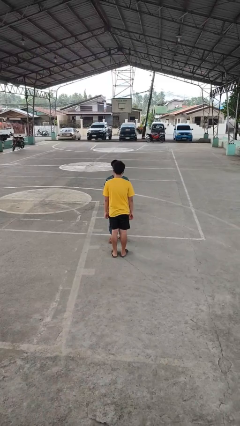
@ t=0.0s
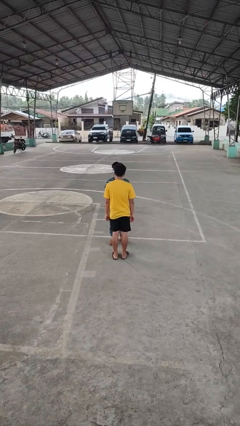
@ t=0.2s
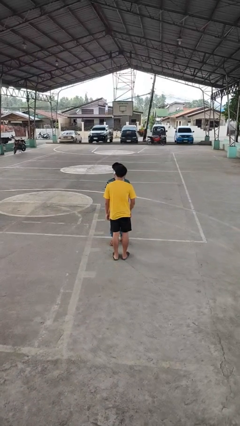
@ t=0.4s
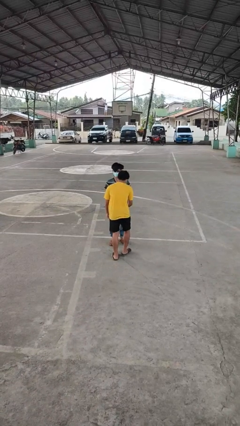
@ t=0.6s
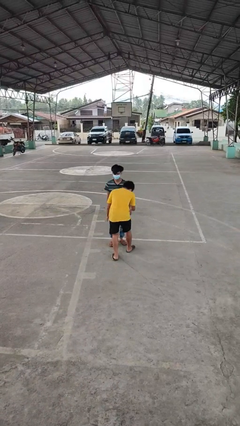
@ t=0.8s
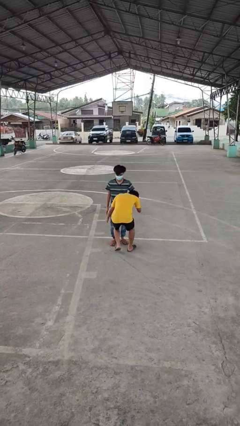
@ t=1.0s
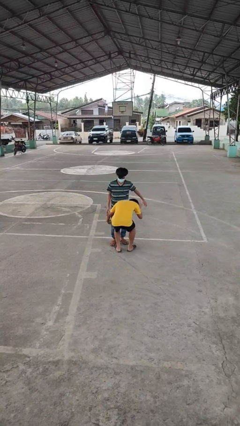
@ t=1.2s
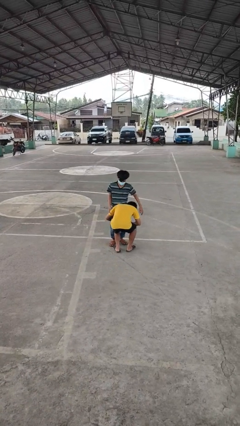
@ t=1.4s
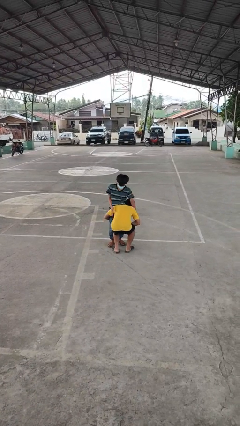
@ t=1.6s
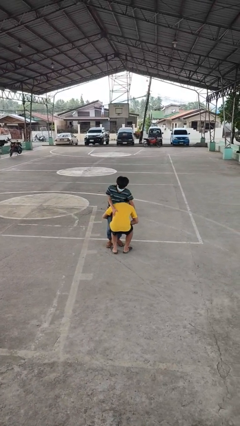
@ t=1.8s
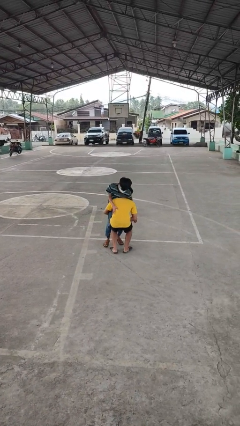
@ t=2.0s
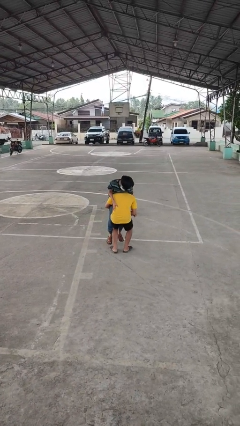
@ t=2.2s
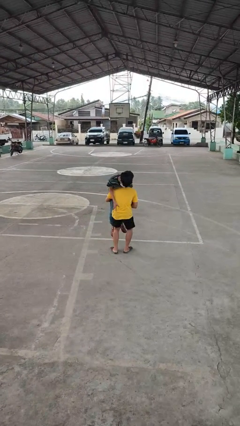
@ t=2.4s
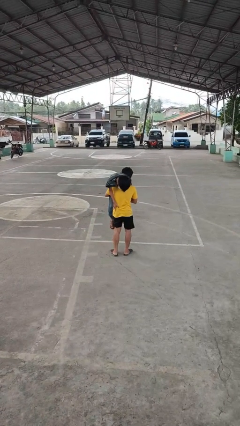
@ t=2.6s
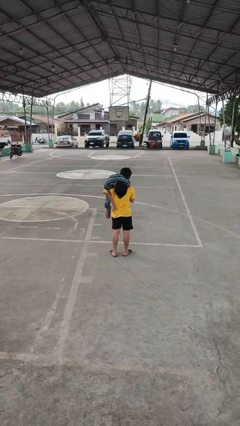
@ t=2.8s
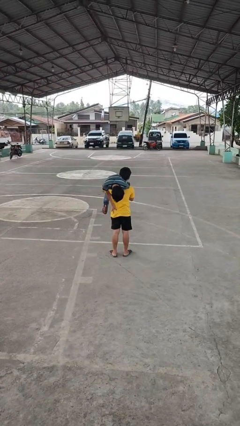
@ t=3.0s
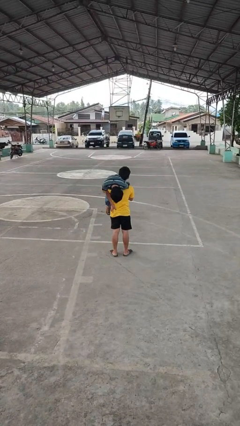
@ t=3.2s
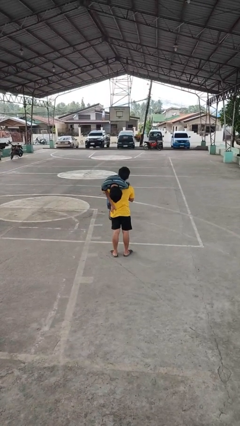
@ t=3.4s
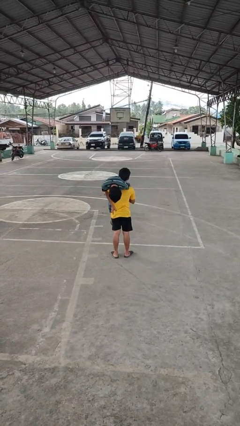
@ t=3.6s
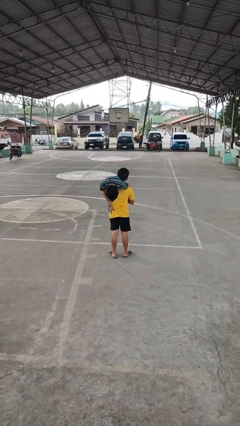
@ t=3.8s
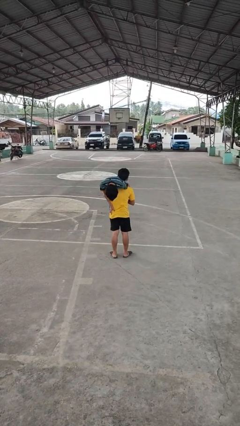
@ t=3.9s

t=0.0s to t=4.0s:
person carries person over shoulder

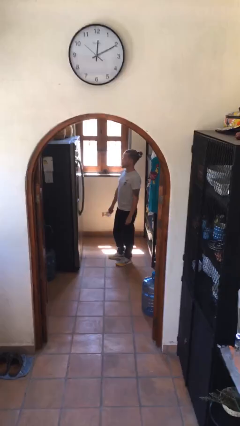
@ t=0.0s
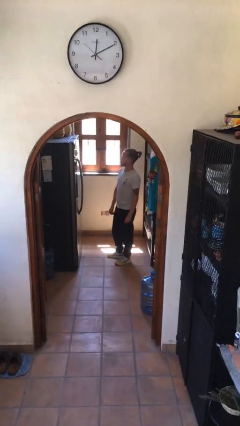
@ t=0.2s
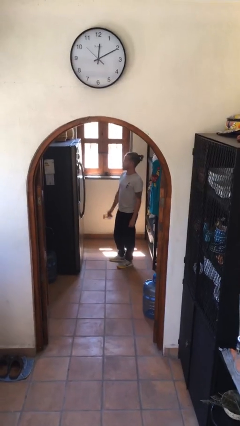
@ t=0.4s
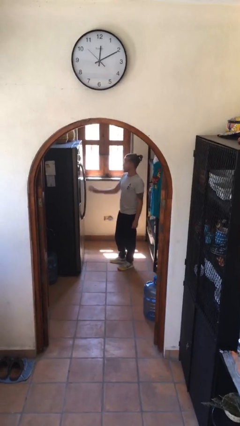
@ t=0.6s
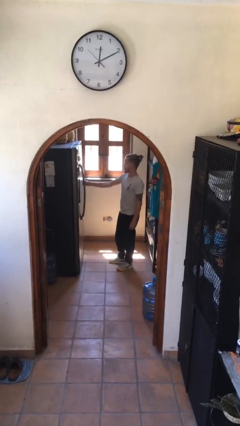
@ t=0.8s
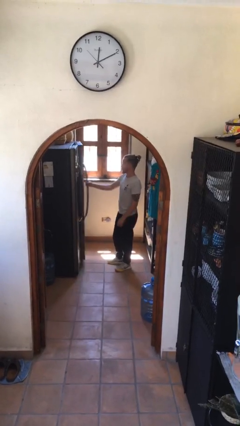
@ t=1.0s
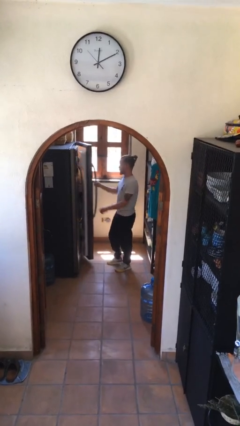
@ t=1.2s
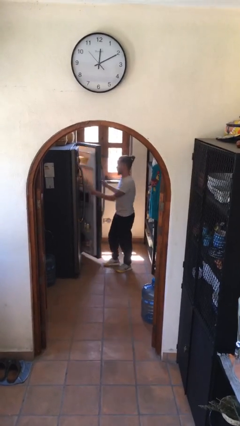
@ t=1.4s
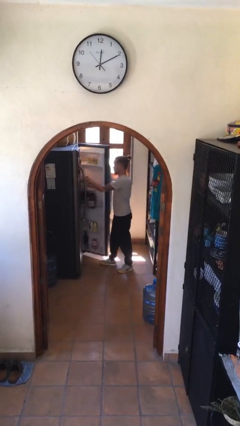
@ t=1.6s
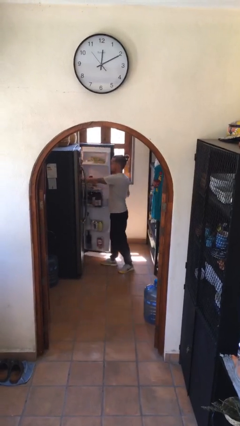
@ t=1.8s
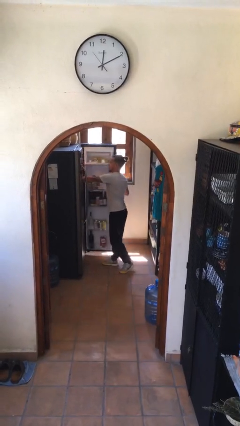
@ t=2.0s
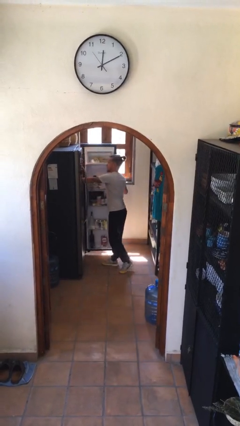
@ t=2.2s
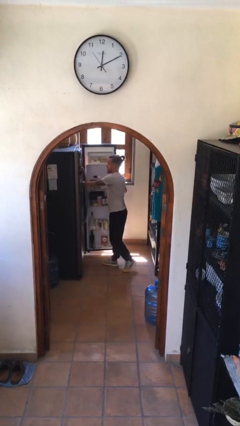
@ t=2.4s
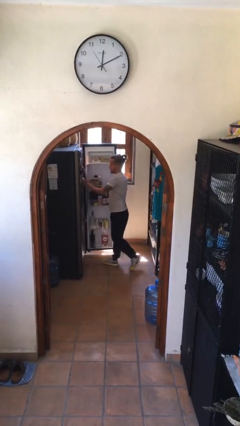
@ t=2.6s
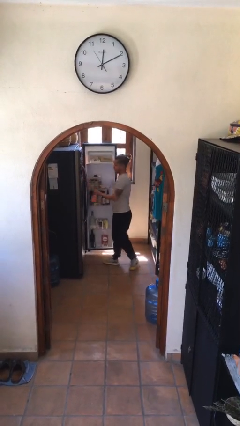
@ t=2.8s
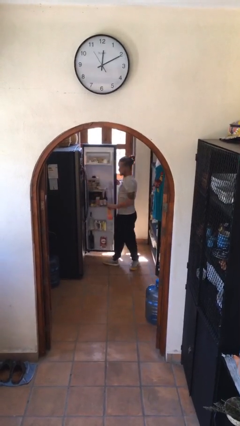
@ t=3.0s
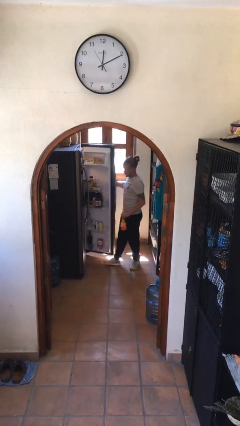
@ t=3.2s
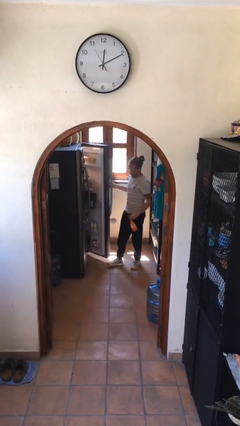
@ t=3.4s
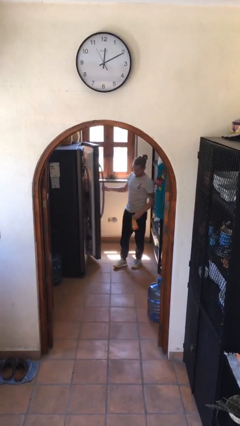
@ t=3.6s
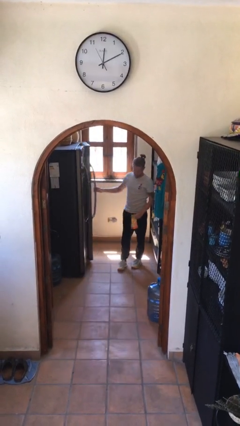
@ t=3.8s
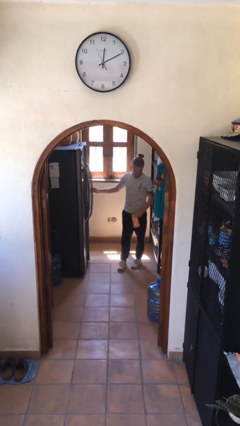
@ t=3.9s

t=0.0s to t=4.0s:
person takes object from refrigerator

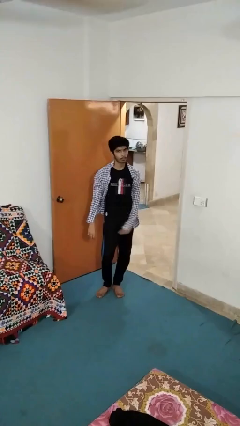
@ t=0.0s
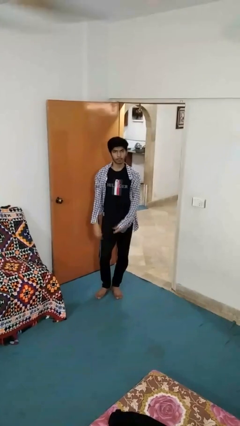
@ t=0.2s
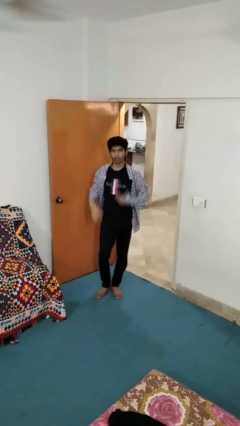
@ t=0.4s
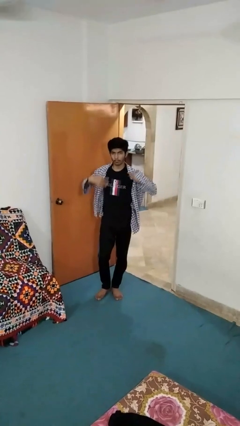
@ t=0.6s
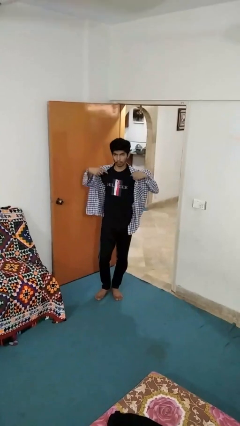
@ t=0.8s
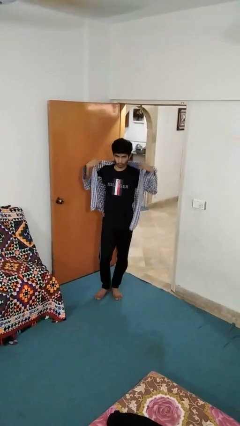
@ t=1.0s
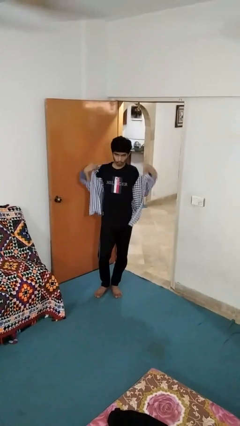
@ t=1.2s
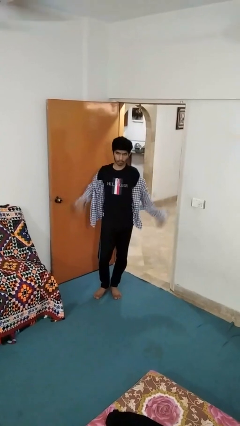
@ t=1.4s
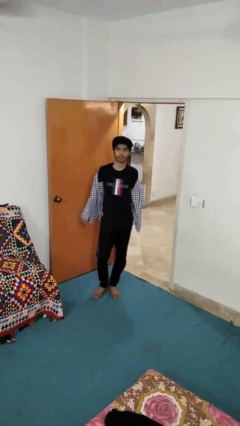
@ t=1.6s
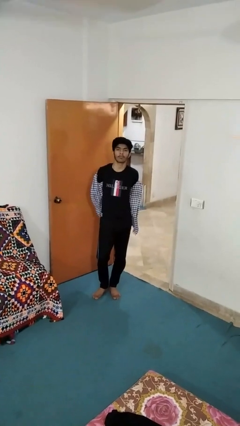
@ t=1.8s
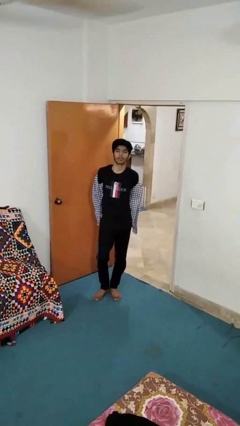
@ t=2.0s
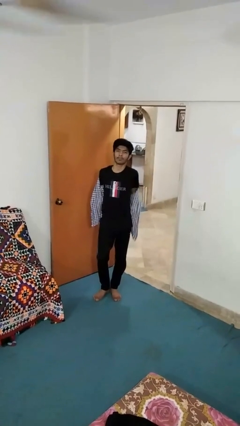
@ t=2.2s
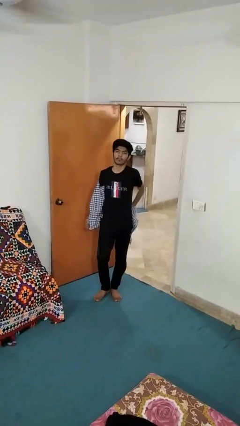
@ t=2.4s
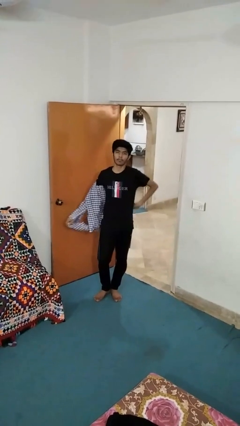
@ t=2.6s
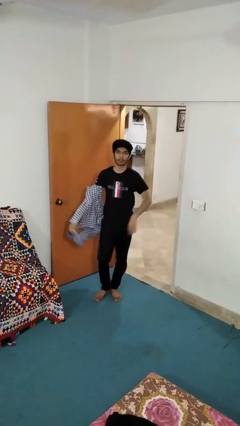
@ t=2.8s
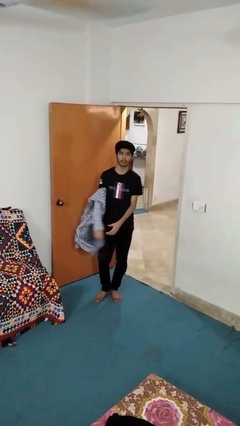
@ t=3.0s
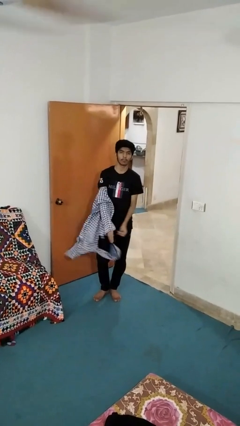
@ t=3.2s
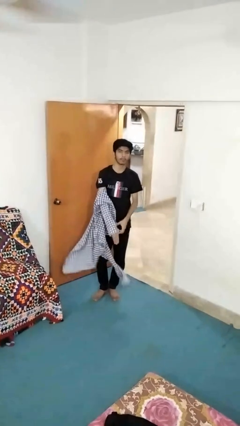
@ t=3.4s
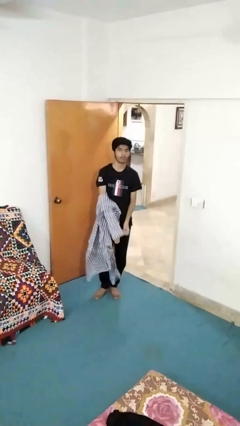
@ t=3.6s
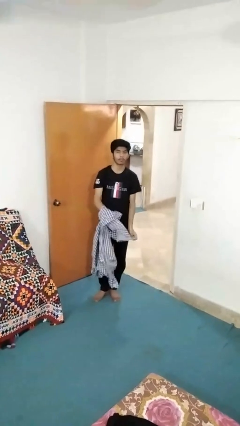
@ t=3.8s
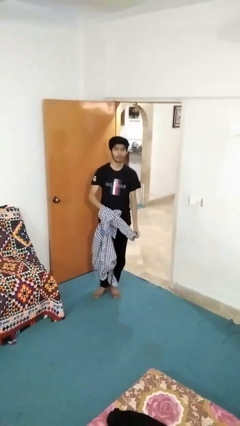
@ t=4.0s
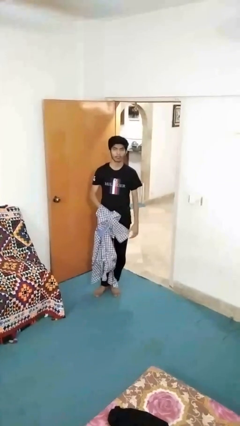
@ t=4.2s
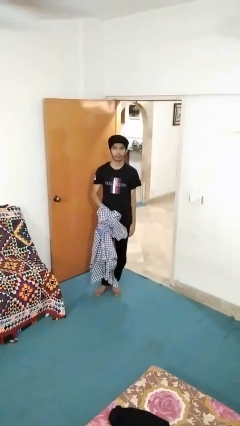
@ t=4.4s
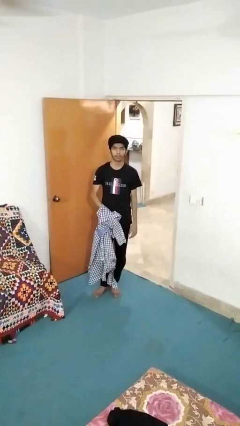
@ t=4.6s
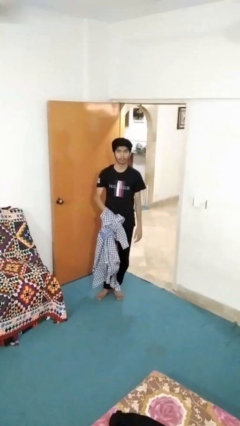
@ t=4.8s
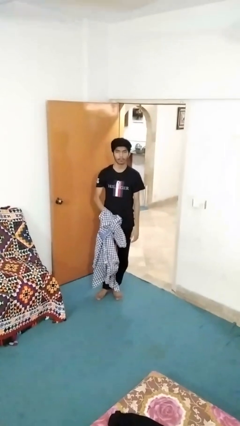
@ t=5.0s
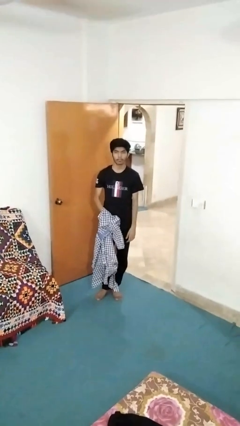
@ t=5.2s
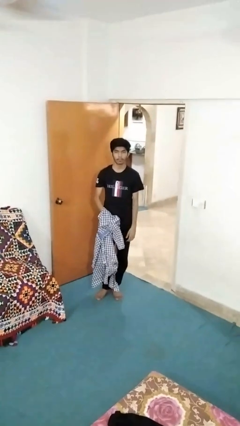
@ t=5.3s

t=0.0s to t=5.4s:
person takes off shirt

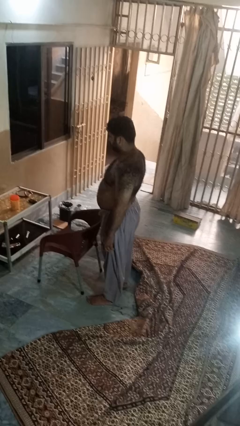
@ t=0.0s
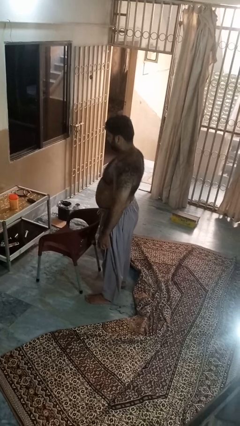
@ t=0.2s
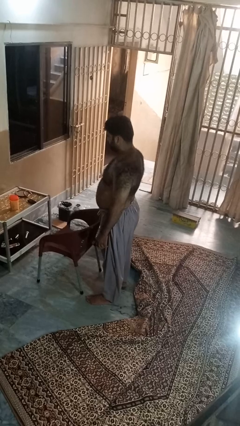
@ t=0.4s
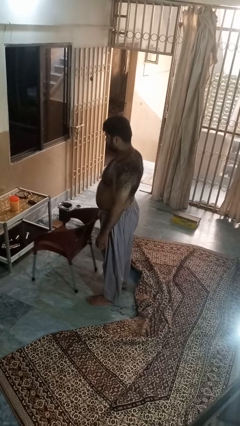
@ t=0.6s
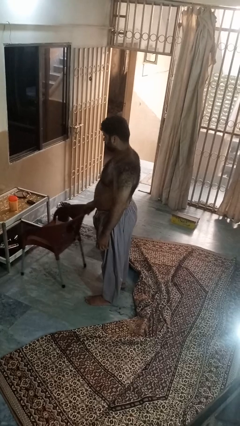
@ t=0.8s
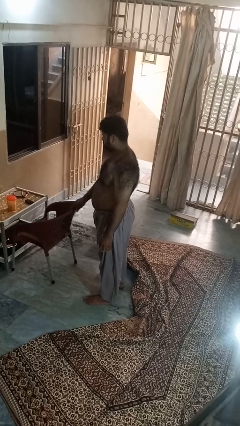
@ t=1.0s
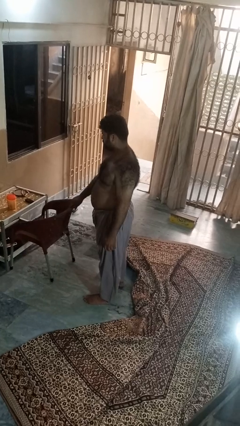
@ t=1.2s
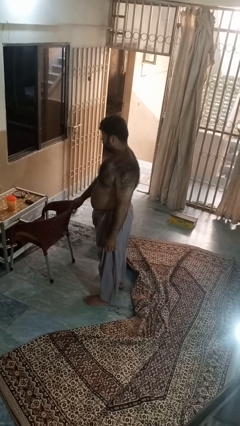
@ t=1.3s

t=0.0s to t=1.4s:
person pushes in chair

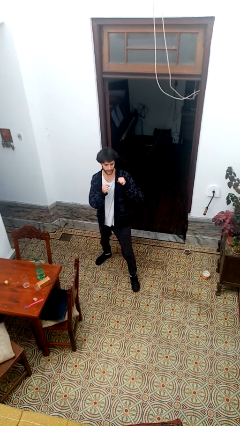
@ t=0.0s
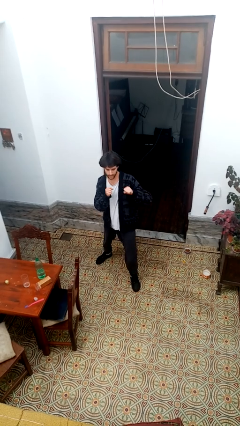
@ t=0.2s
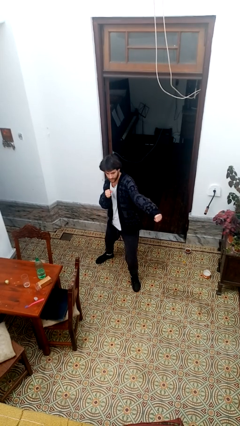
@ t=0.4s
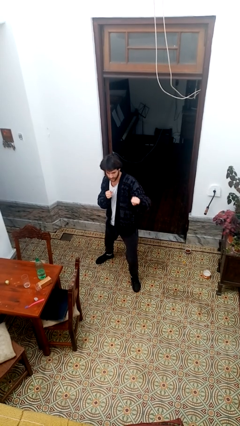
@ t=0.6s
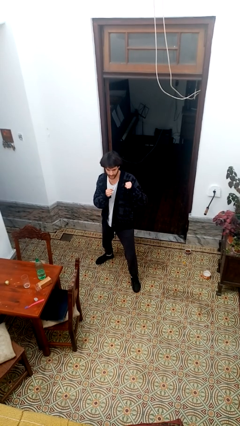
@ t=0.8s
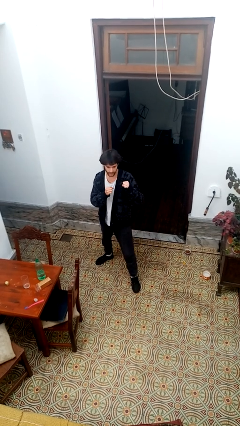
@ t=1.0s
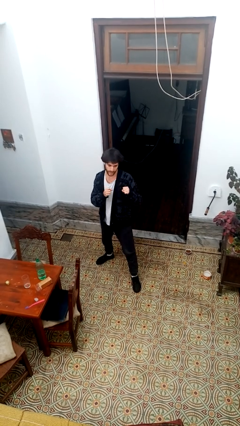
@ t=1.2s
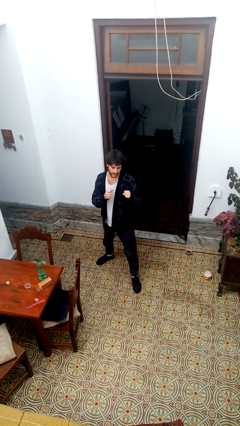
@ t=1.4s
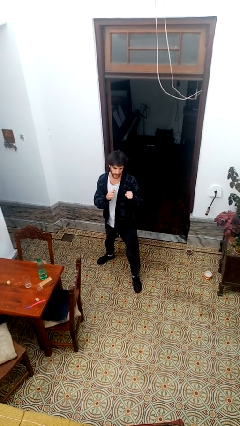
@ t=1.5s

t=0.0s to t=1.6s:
person karate chop

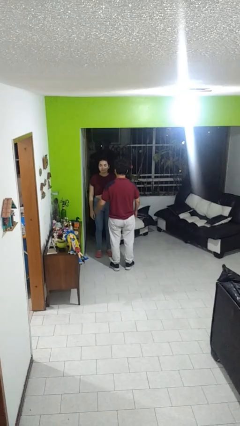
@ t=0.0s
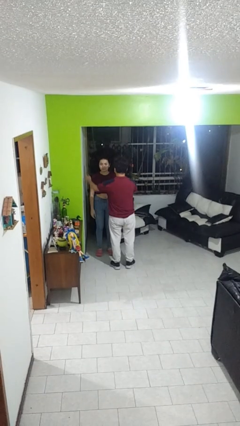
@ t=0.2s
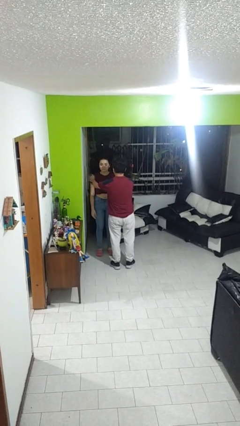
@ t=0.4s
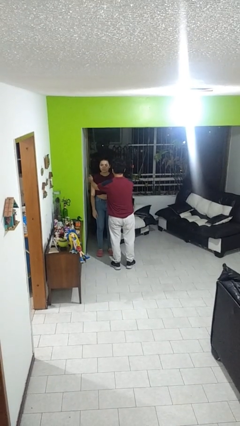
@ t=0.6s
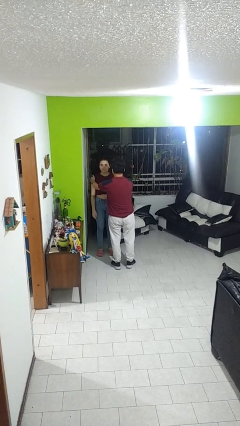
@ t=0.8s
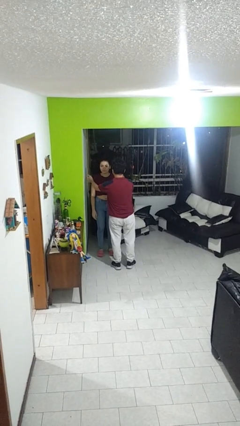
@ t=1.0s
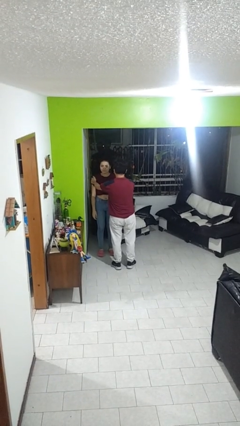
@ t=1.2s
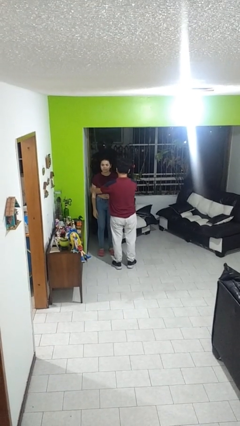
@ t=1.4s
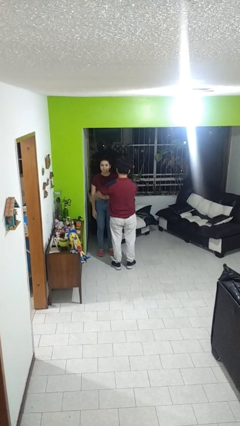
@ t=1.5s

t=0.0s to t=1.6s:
person pounds shoulders of person
